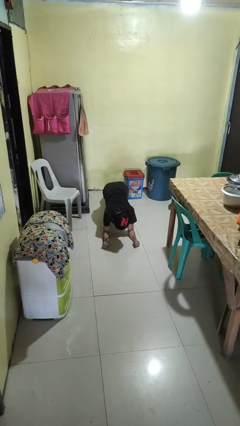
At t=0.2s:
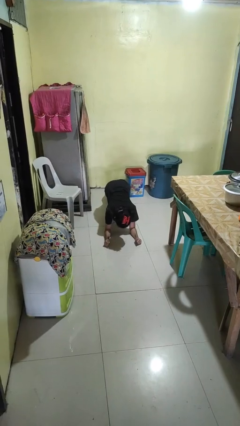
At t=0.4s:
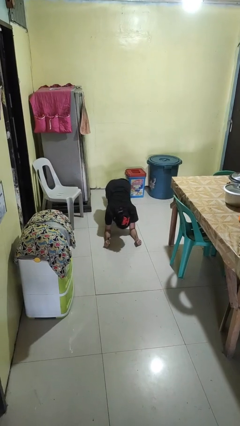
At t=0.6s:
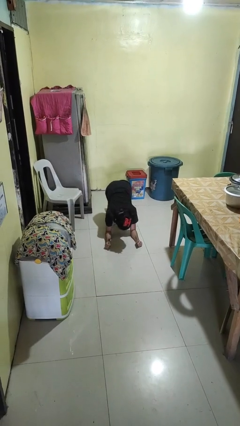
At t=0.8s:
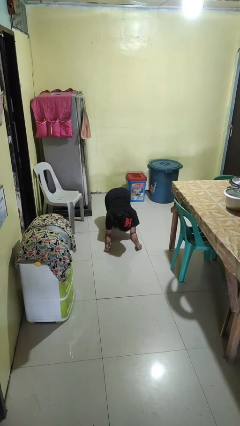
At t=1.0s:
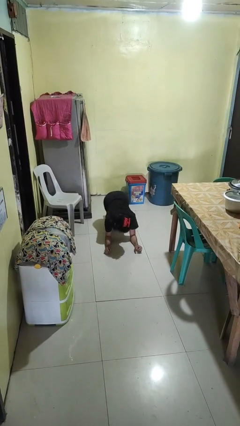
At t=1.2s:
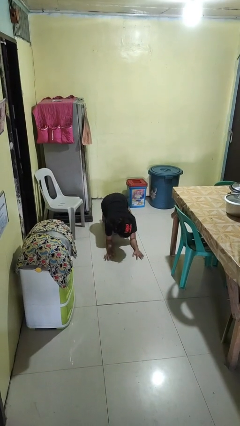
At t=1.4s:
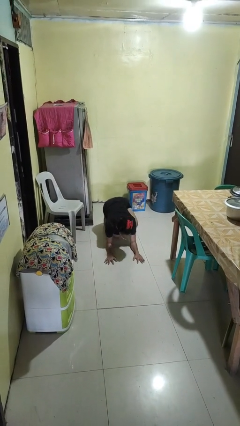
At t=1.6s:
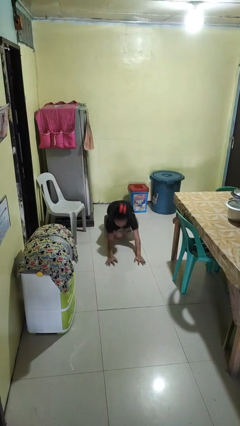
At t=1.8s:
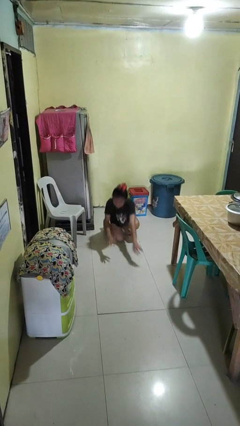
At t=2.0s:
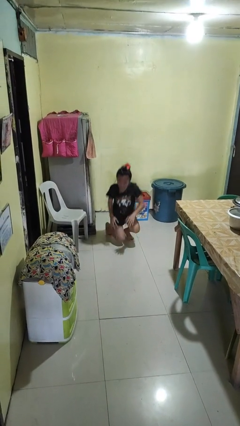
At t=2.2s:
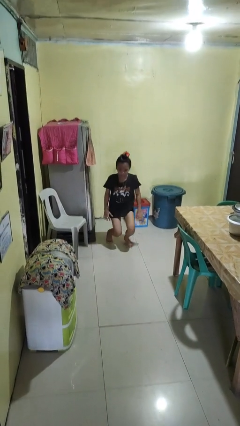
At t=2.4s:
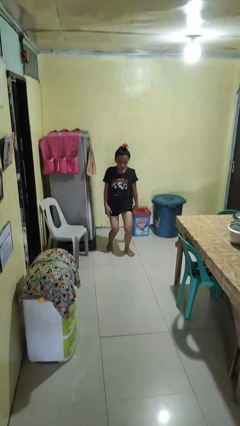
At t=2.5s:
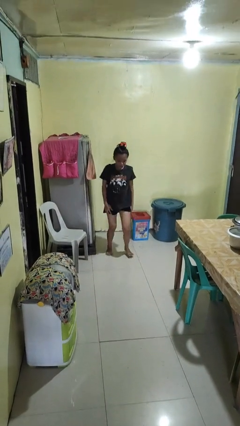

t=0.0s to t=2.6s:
person stands up from floor

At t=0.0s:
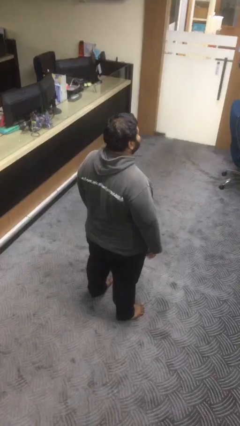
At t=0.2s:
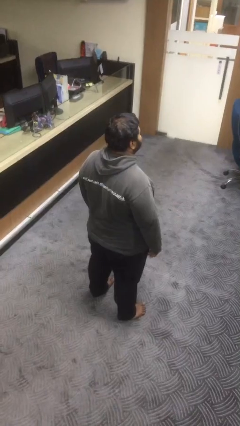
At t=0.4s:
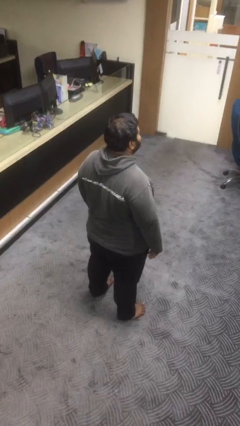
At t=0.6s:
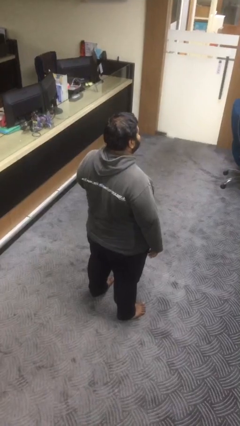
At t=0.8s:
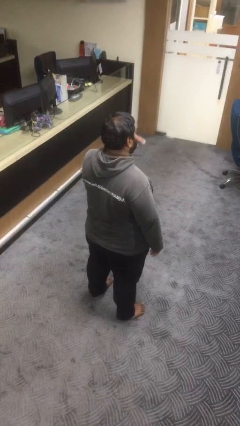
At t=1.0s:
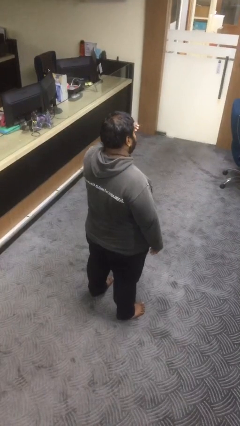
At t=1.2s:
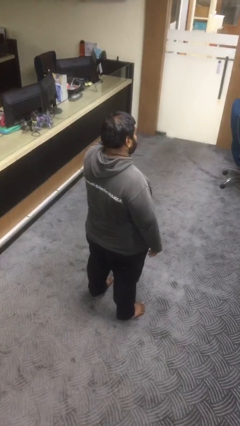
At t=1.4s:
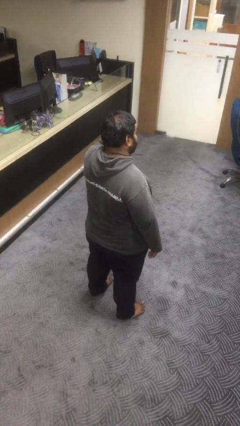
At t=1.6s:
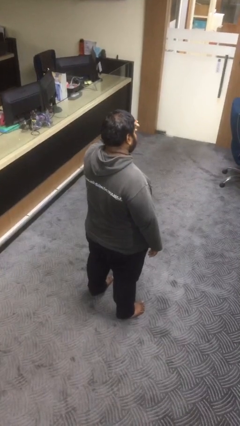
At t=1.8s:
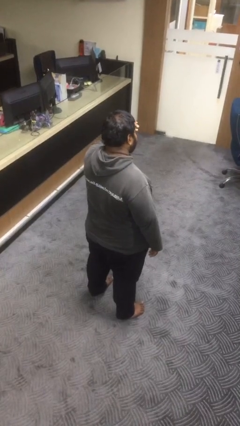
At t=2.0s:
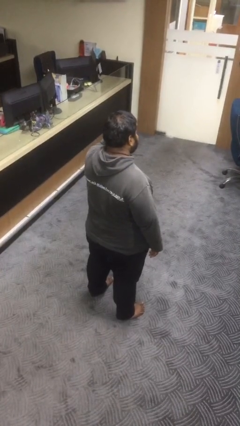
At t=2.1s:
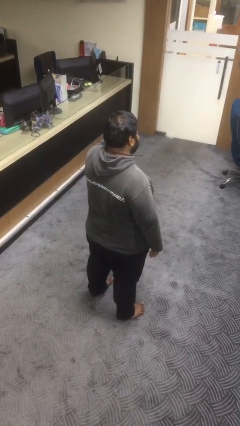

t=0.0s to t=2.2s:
person rubs eyes

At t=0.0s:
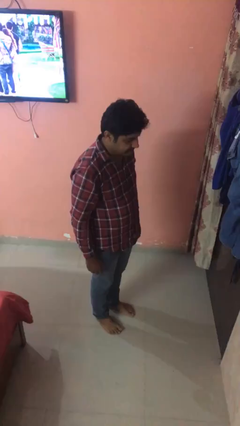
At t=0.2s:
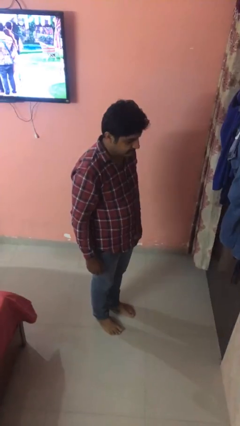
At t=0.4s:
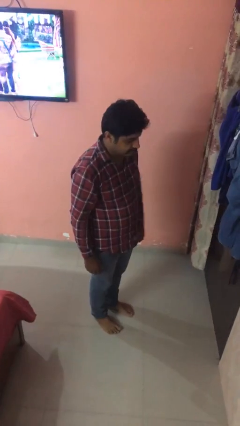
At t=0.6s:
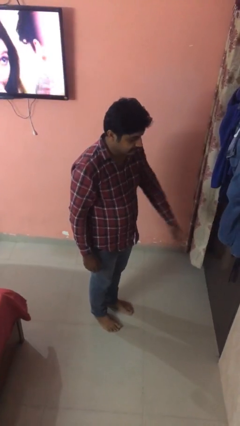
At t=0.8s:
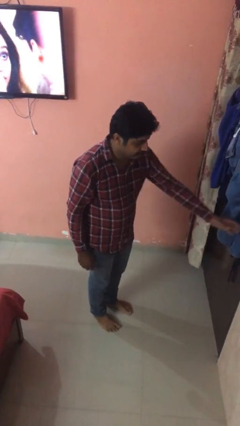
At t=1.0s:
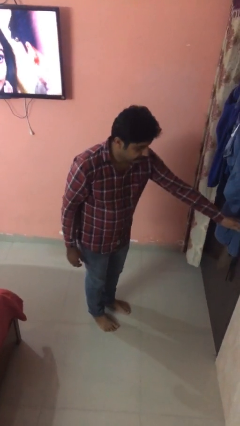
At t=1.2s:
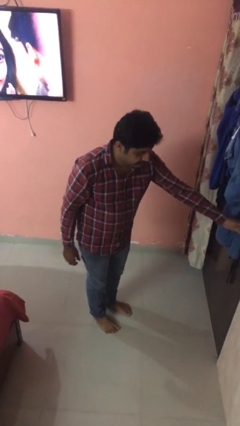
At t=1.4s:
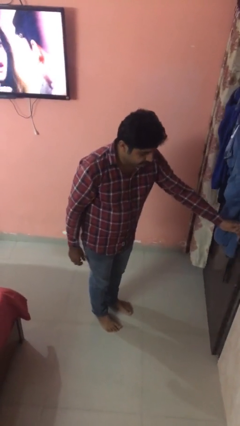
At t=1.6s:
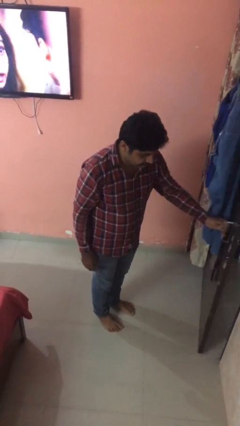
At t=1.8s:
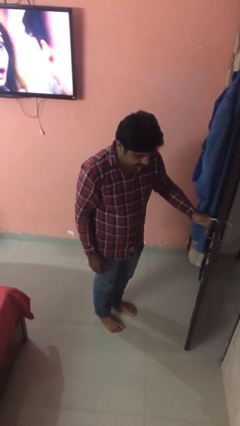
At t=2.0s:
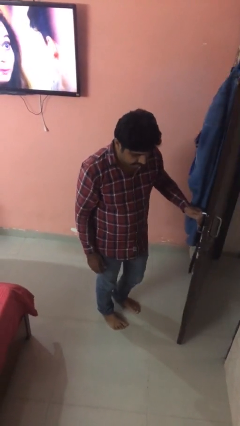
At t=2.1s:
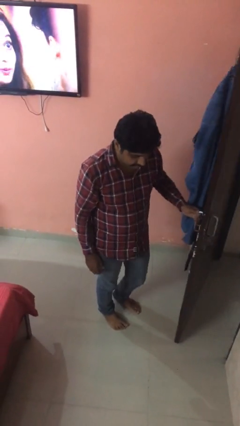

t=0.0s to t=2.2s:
person opens facility door

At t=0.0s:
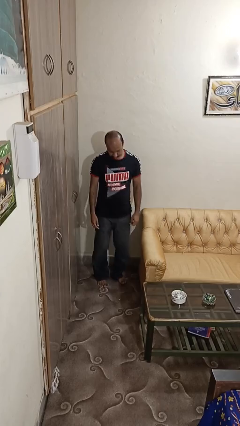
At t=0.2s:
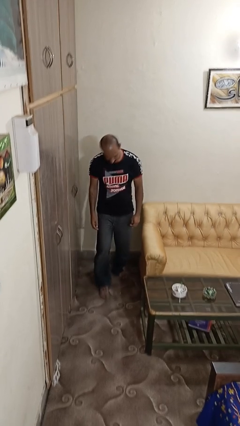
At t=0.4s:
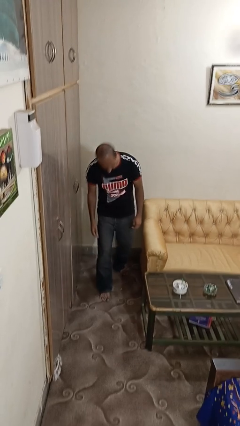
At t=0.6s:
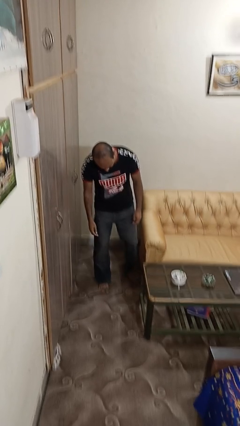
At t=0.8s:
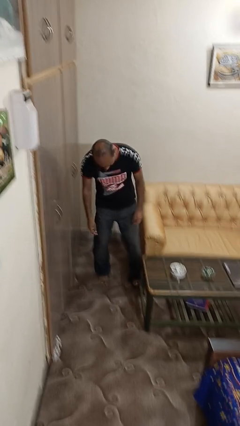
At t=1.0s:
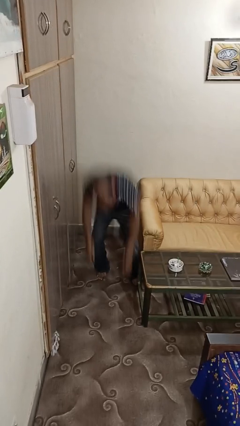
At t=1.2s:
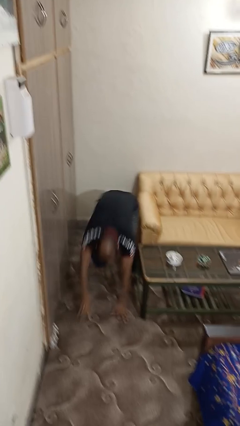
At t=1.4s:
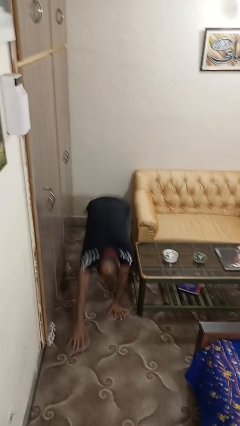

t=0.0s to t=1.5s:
person trips on object on floor

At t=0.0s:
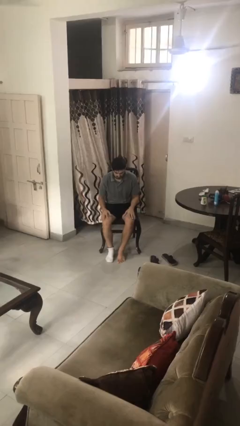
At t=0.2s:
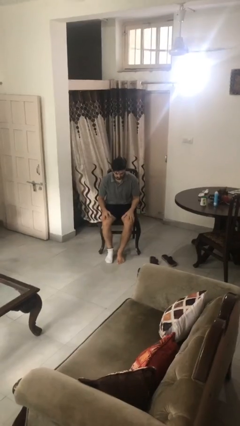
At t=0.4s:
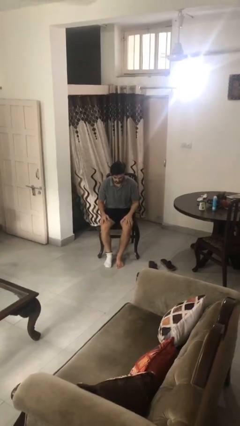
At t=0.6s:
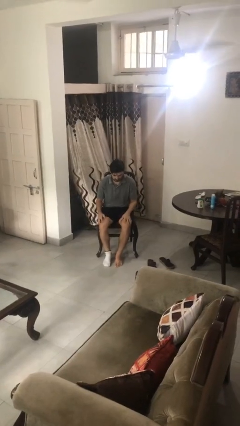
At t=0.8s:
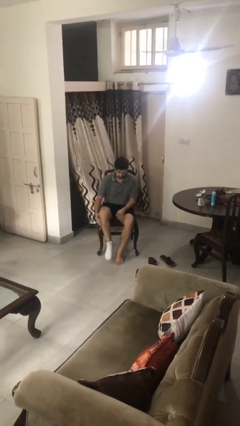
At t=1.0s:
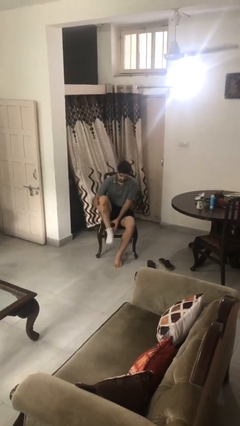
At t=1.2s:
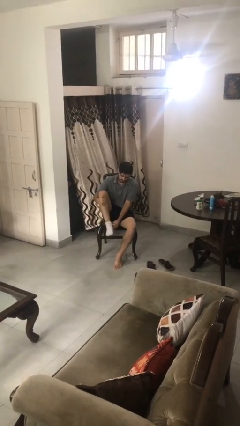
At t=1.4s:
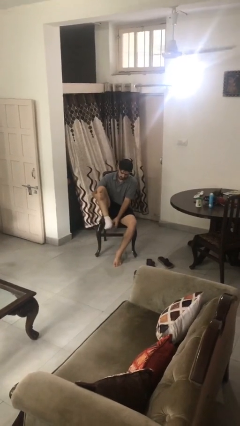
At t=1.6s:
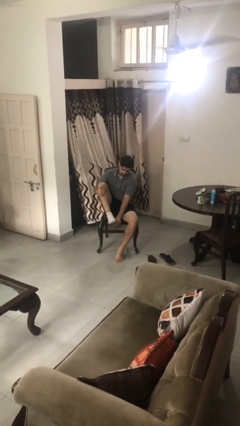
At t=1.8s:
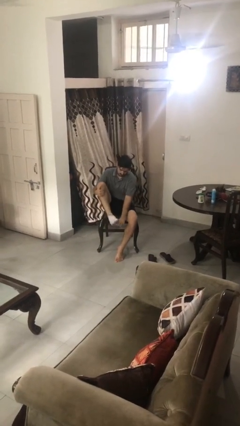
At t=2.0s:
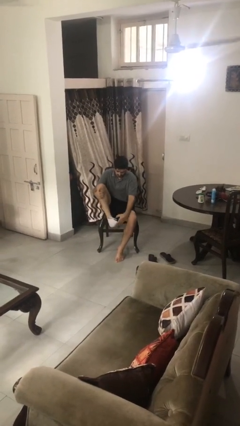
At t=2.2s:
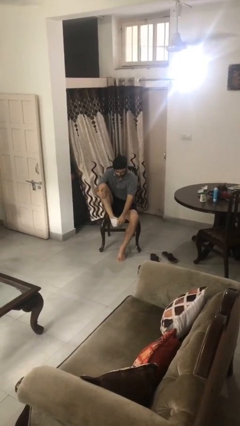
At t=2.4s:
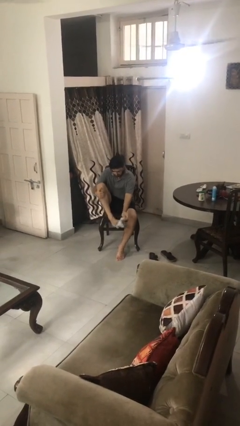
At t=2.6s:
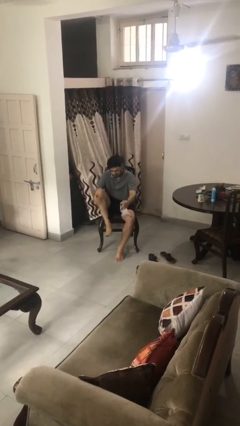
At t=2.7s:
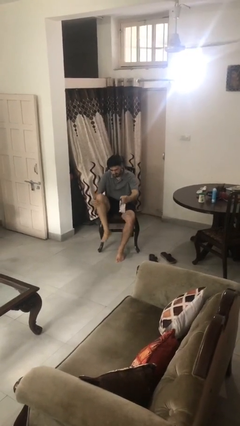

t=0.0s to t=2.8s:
person takes off socks

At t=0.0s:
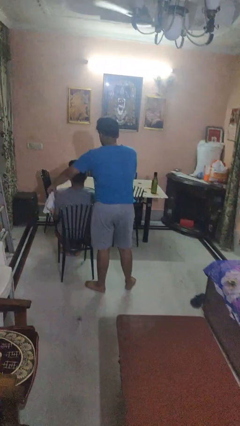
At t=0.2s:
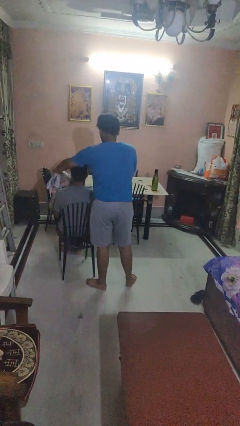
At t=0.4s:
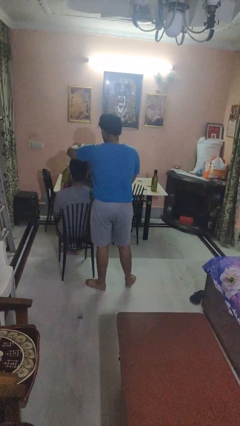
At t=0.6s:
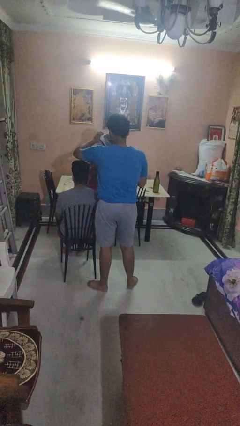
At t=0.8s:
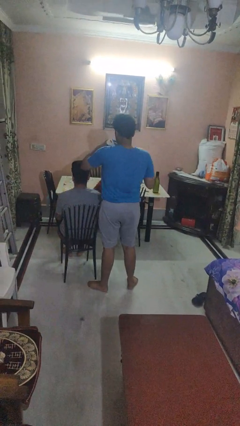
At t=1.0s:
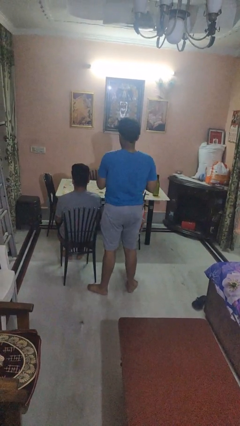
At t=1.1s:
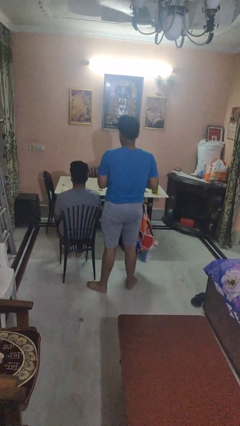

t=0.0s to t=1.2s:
person uncovers friend with blanket

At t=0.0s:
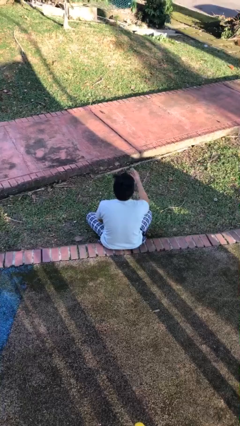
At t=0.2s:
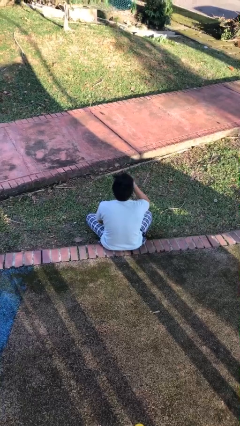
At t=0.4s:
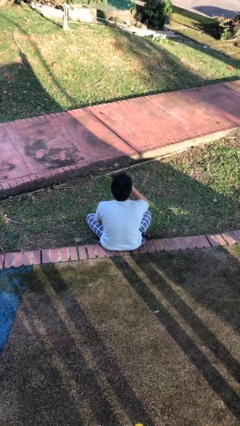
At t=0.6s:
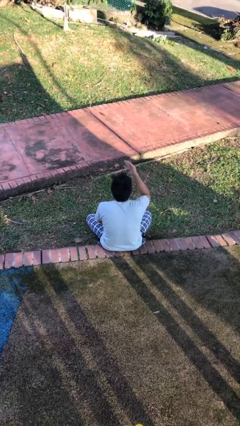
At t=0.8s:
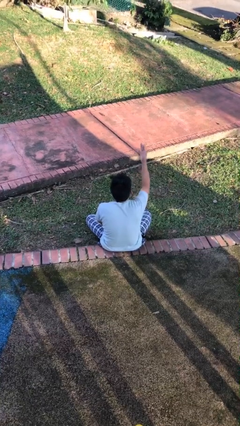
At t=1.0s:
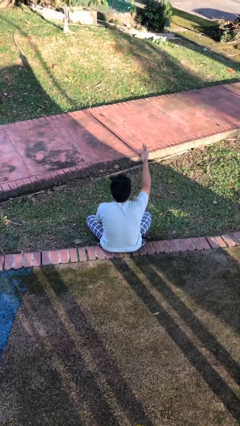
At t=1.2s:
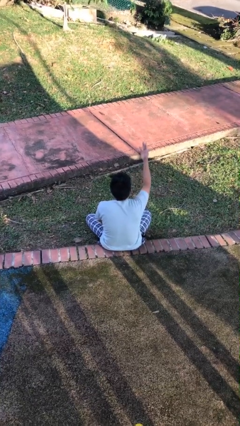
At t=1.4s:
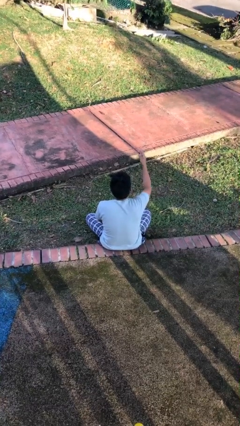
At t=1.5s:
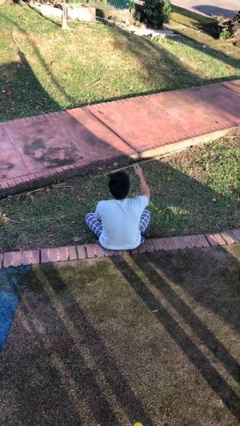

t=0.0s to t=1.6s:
person gestures blow kiss

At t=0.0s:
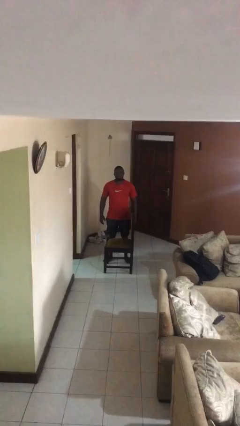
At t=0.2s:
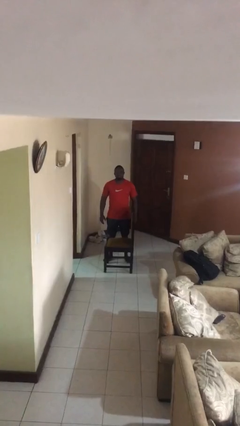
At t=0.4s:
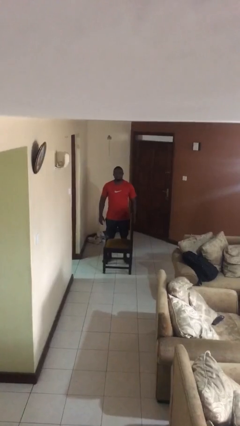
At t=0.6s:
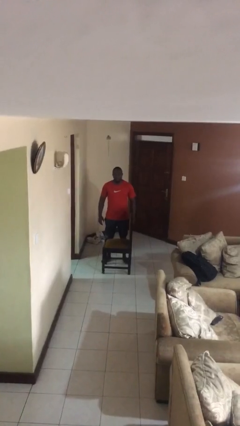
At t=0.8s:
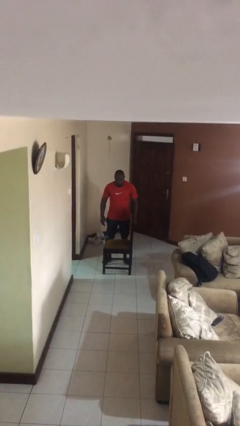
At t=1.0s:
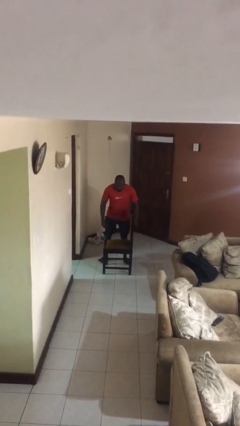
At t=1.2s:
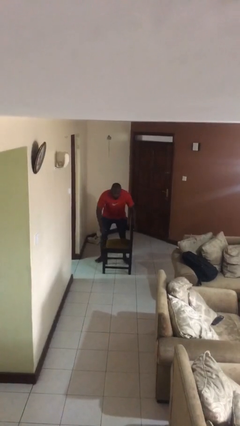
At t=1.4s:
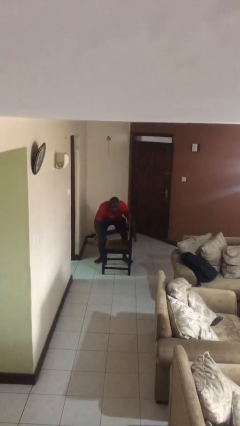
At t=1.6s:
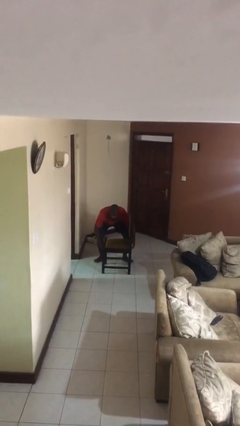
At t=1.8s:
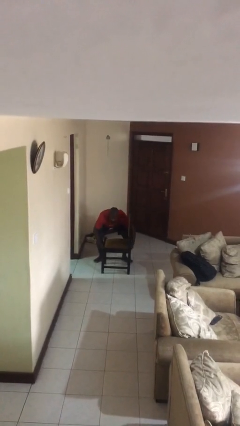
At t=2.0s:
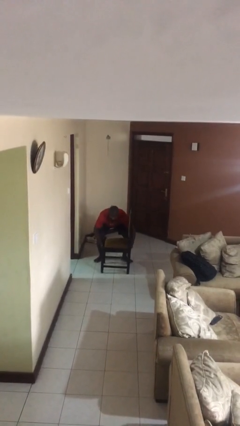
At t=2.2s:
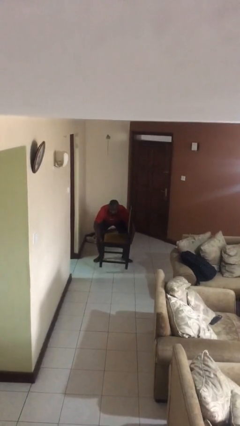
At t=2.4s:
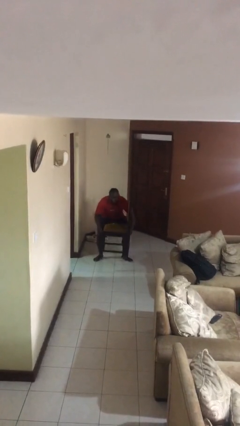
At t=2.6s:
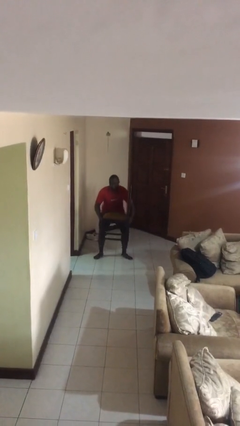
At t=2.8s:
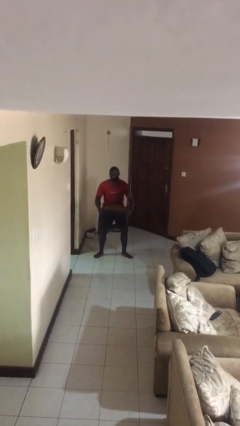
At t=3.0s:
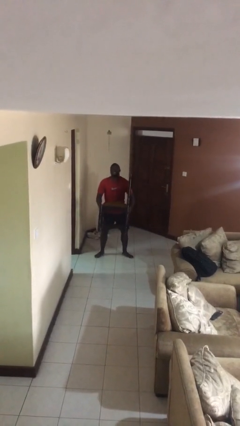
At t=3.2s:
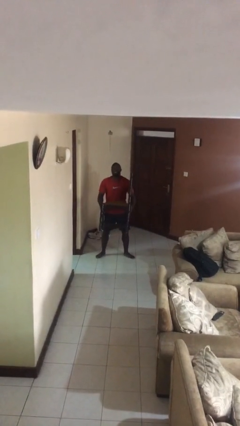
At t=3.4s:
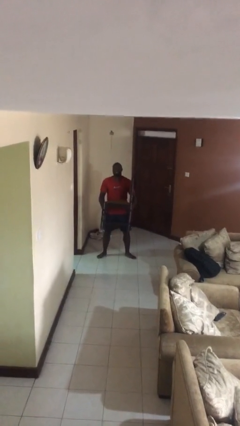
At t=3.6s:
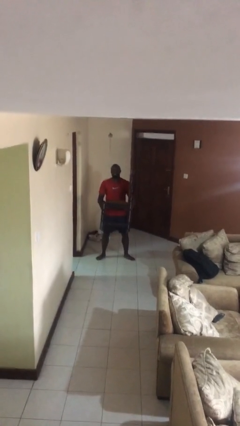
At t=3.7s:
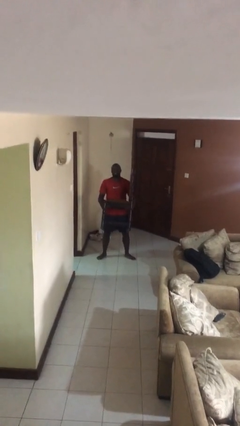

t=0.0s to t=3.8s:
person picks up object from floor
